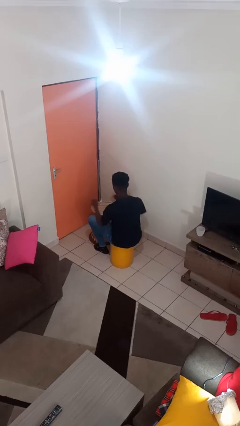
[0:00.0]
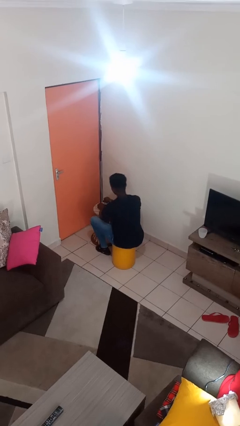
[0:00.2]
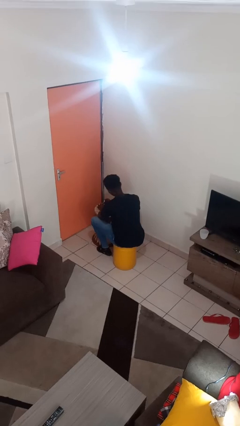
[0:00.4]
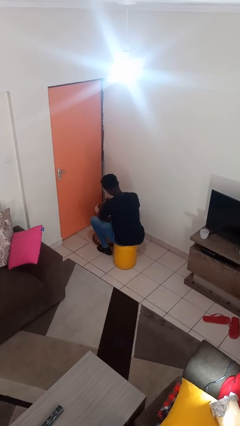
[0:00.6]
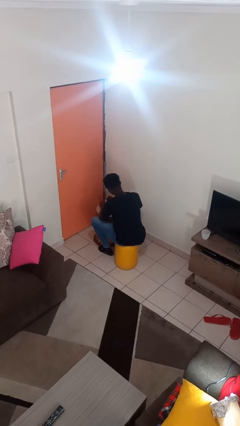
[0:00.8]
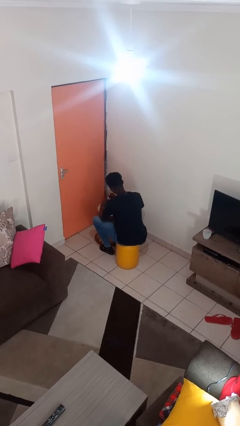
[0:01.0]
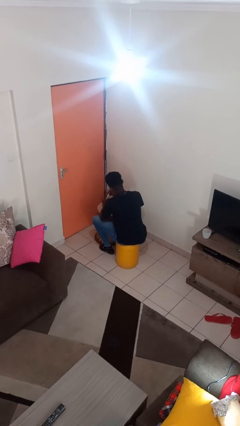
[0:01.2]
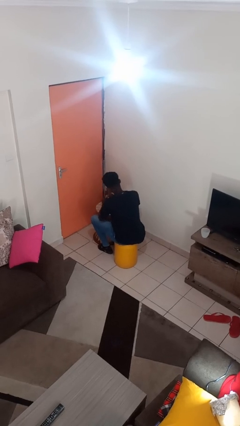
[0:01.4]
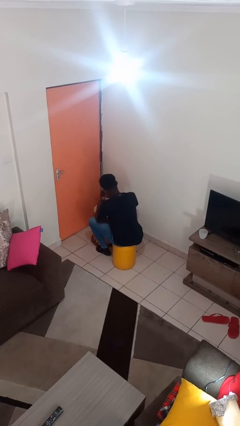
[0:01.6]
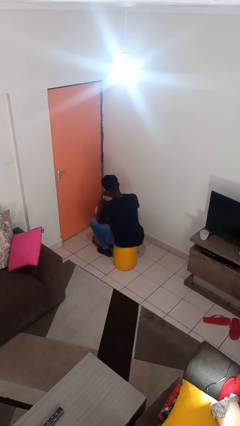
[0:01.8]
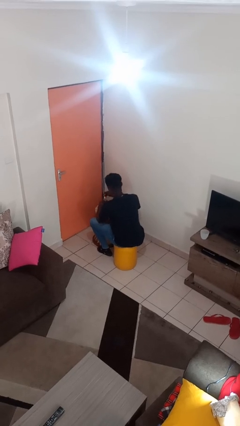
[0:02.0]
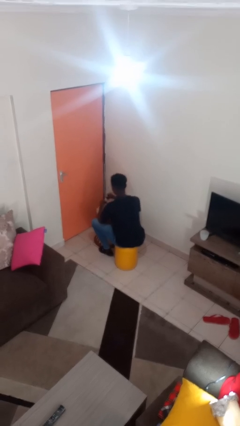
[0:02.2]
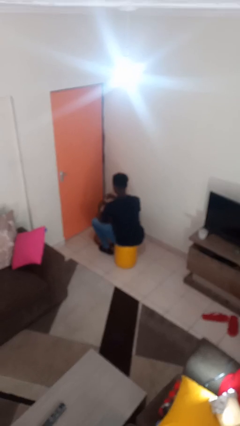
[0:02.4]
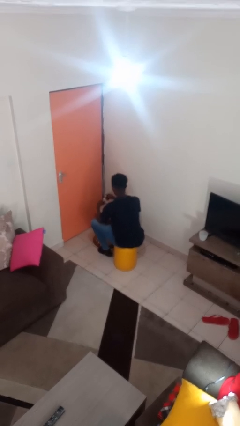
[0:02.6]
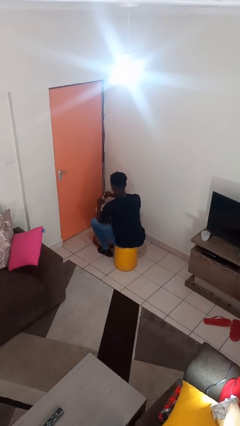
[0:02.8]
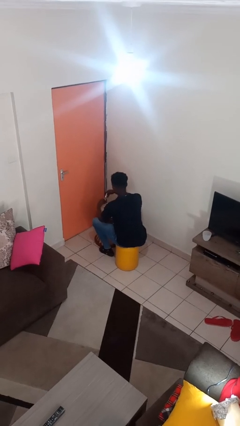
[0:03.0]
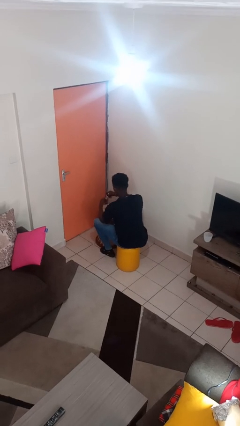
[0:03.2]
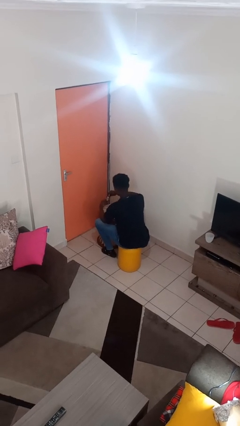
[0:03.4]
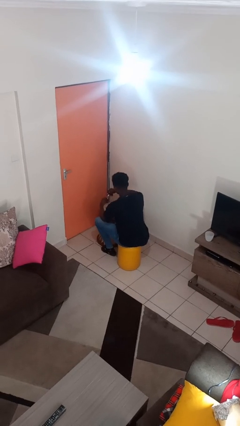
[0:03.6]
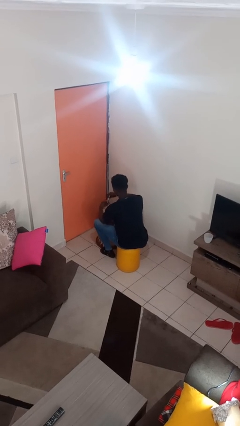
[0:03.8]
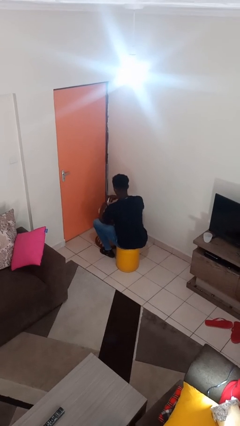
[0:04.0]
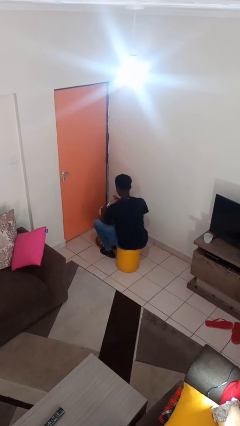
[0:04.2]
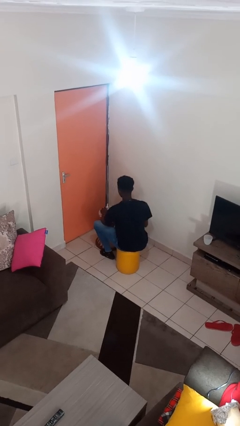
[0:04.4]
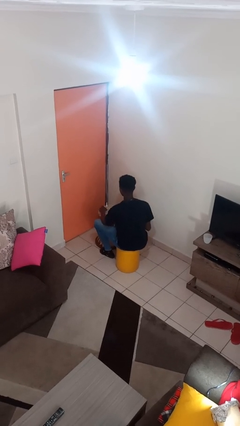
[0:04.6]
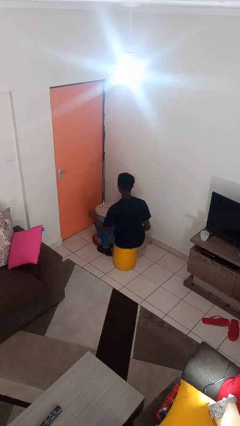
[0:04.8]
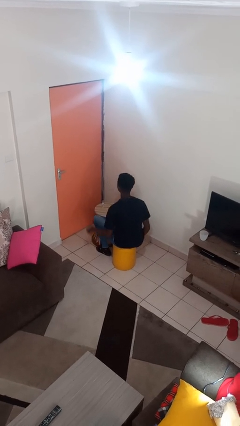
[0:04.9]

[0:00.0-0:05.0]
person paints fingernails

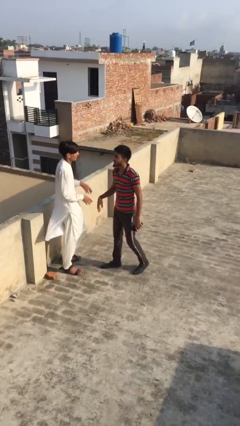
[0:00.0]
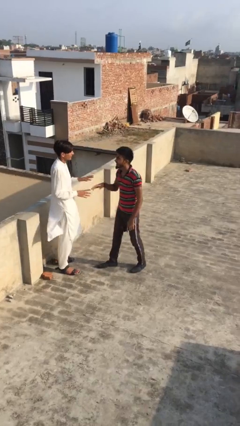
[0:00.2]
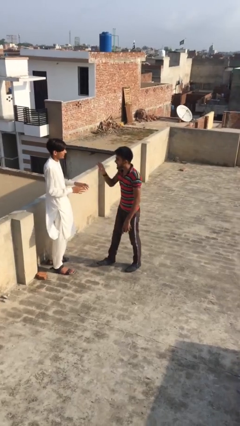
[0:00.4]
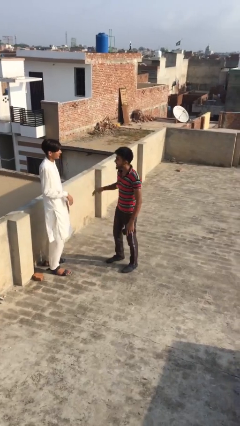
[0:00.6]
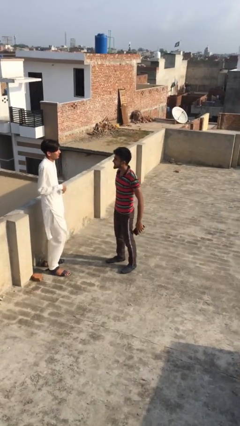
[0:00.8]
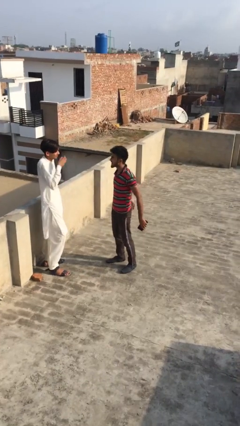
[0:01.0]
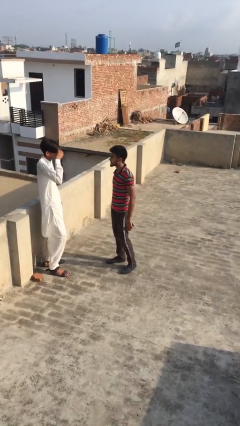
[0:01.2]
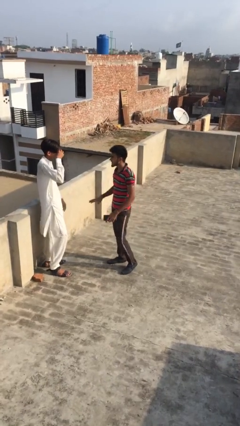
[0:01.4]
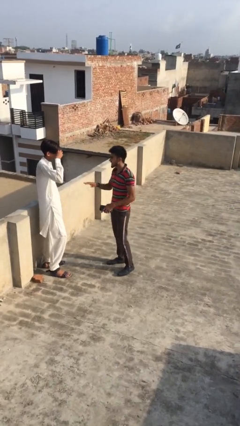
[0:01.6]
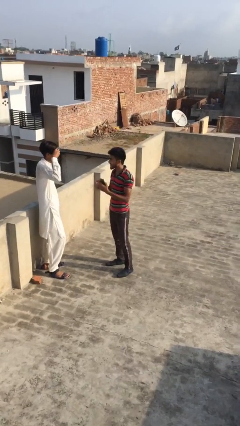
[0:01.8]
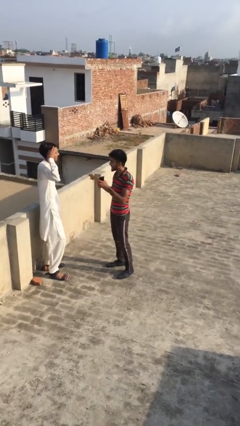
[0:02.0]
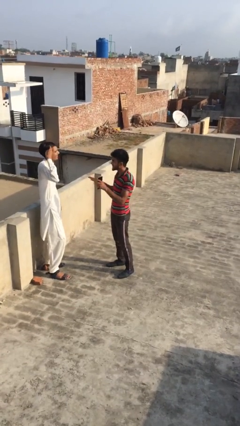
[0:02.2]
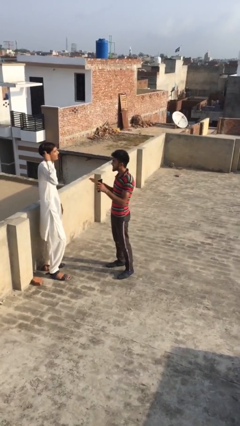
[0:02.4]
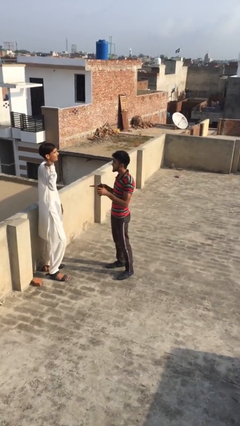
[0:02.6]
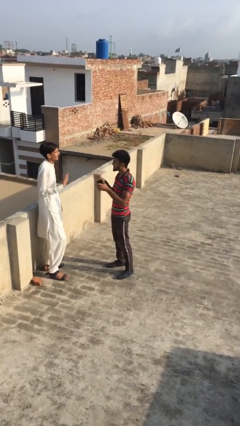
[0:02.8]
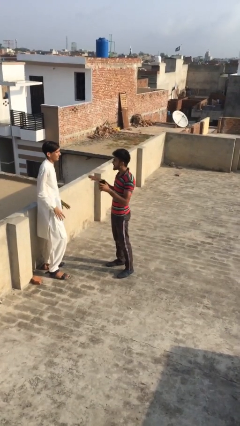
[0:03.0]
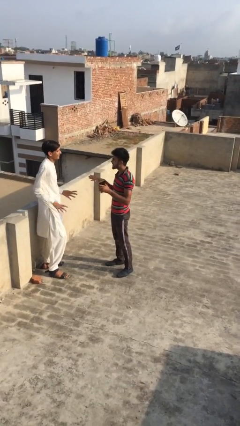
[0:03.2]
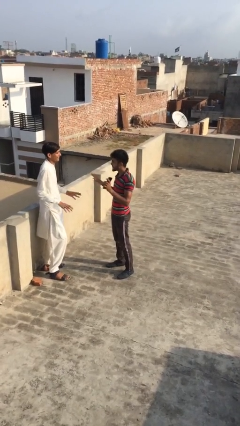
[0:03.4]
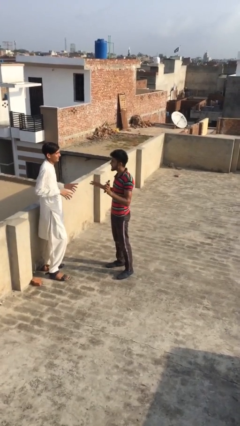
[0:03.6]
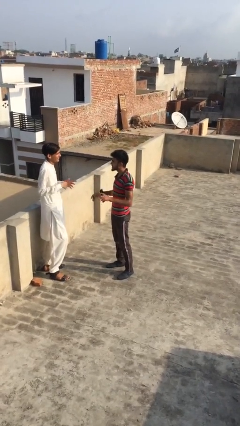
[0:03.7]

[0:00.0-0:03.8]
person talks to person

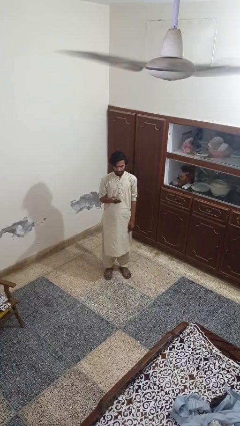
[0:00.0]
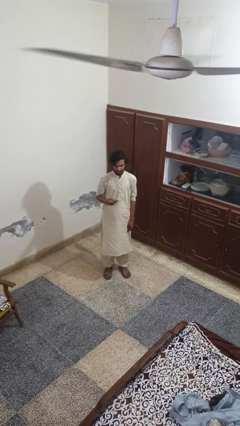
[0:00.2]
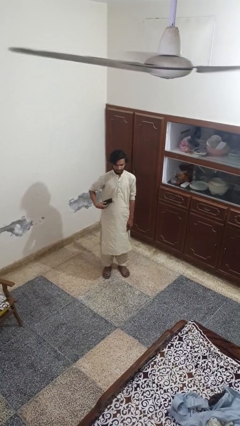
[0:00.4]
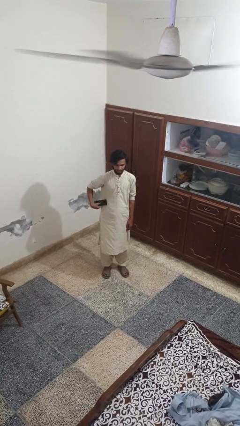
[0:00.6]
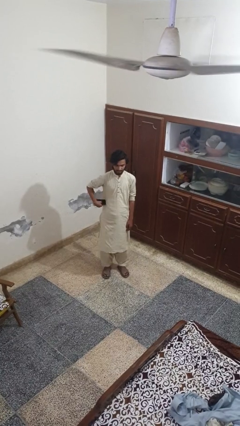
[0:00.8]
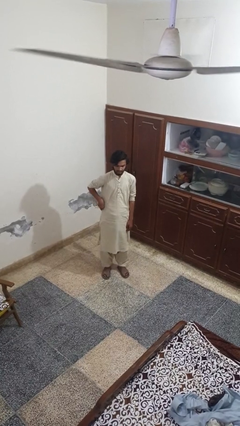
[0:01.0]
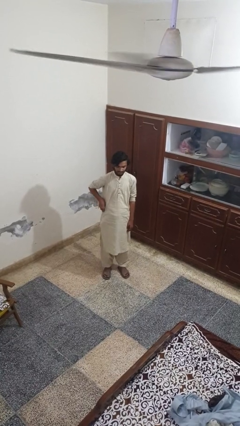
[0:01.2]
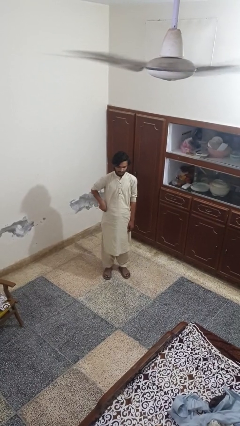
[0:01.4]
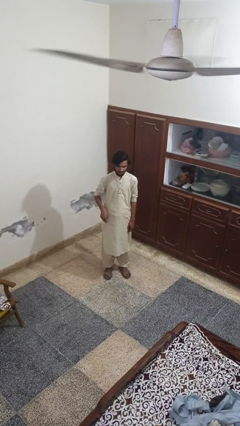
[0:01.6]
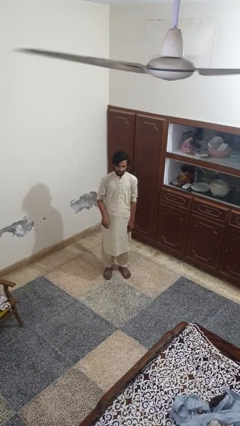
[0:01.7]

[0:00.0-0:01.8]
person puts phone into pocket

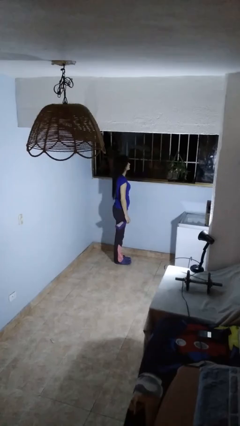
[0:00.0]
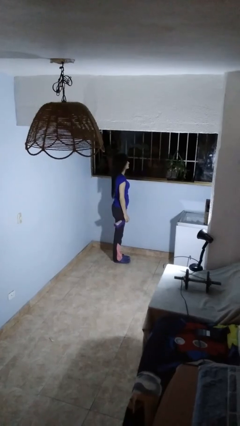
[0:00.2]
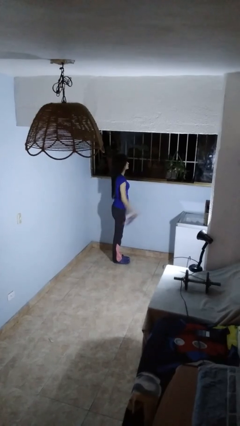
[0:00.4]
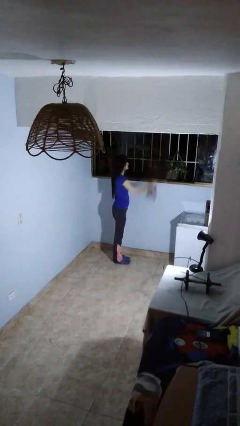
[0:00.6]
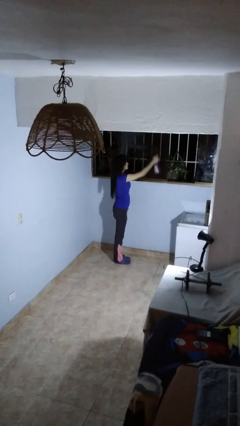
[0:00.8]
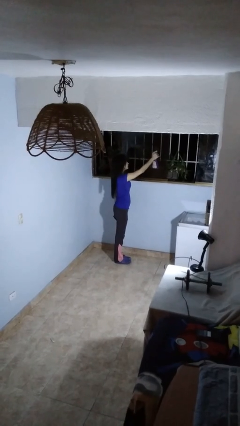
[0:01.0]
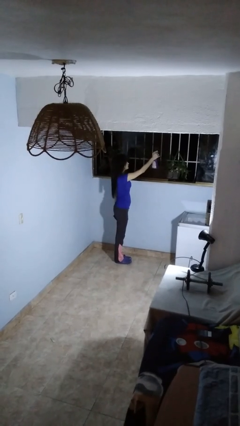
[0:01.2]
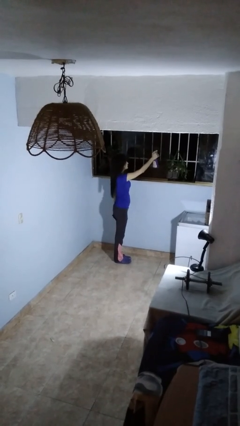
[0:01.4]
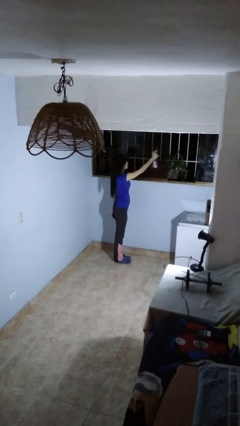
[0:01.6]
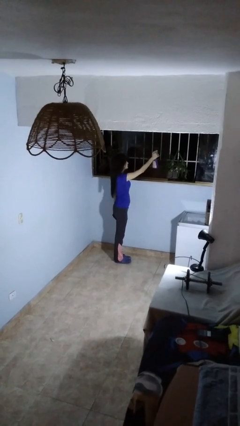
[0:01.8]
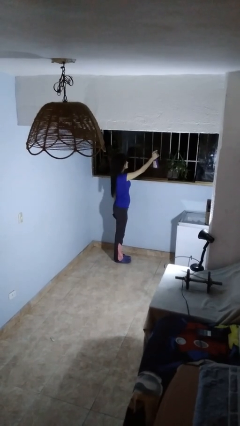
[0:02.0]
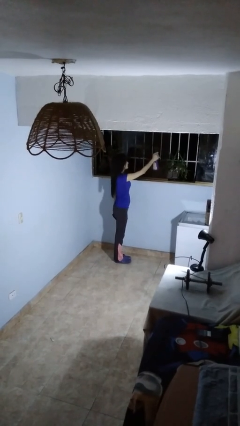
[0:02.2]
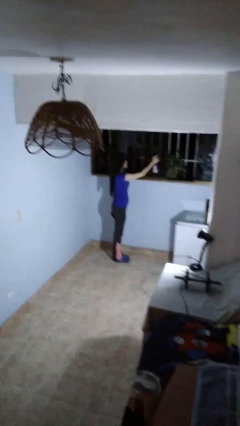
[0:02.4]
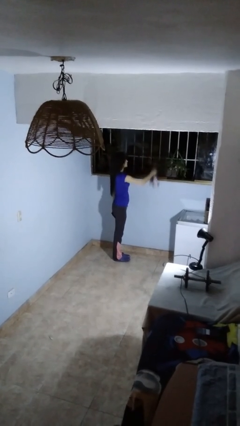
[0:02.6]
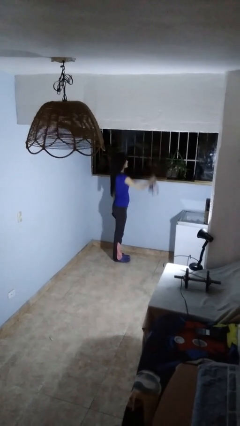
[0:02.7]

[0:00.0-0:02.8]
person sprays from bottle

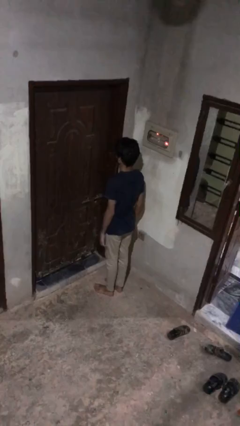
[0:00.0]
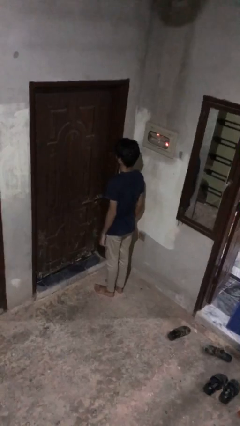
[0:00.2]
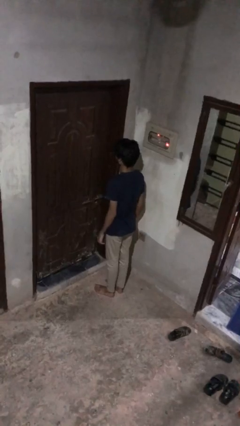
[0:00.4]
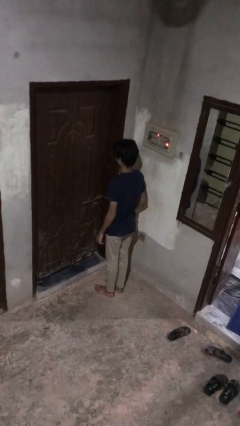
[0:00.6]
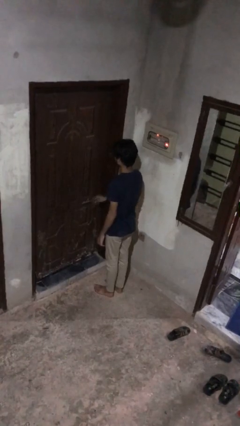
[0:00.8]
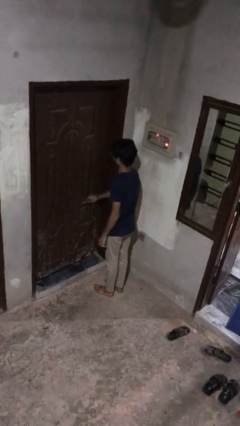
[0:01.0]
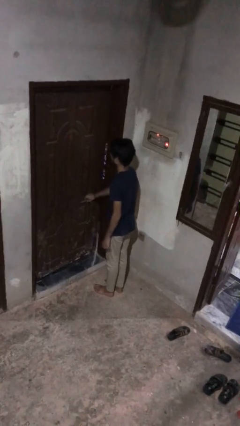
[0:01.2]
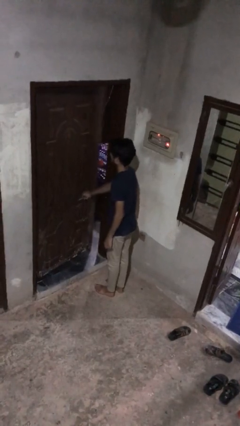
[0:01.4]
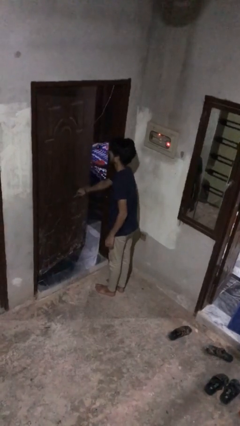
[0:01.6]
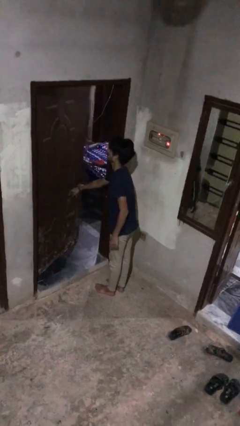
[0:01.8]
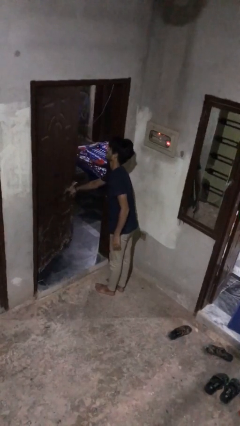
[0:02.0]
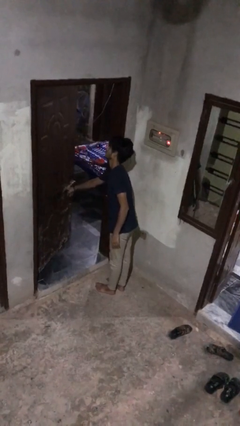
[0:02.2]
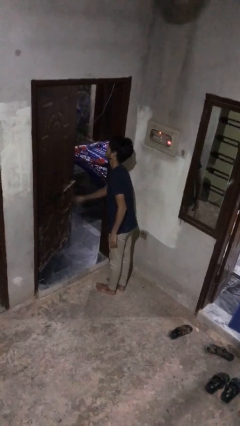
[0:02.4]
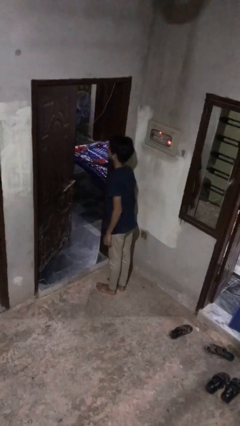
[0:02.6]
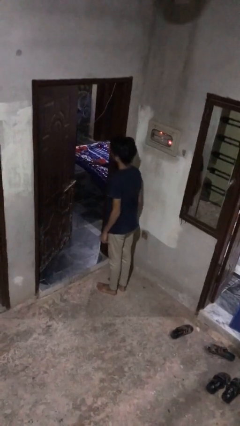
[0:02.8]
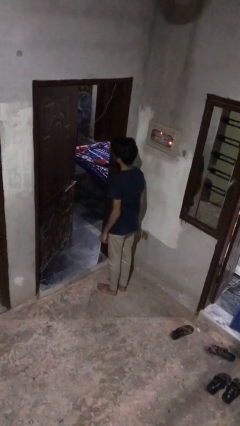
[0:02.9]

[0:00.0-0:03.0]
person opens facility door

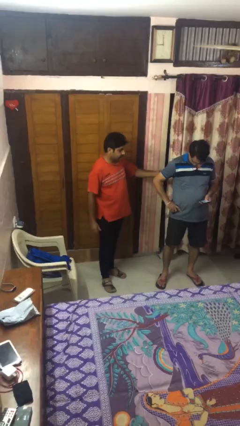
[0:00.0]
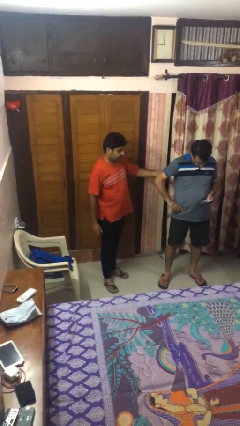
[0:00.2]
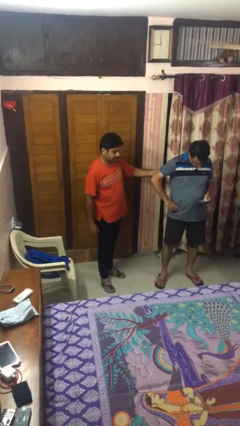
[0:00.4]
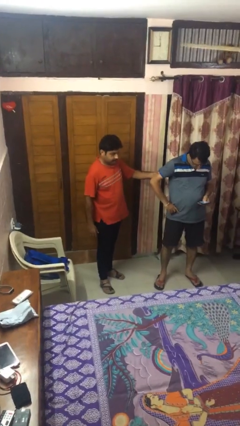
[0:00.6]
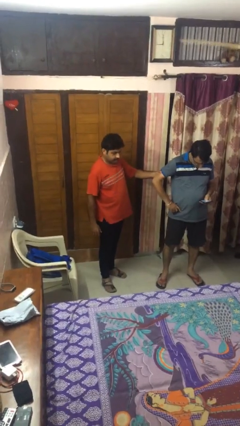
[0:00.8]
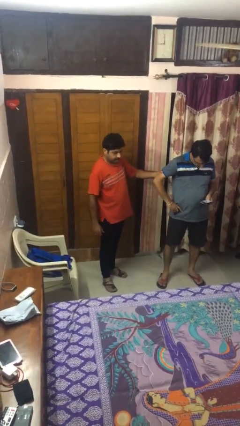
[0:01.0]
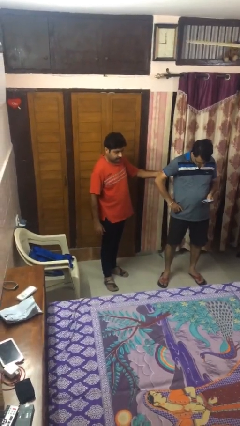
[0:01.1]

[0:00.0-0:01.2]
person grabs person by bicep
